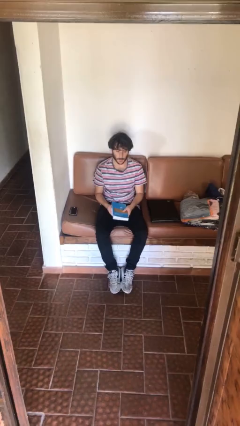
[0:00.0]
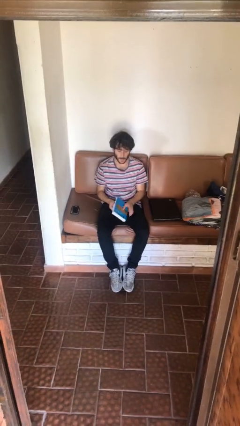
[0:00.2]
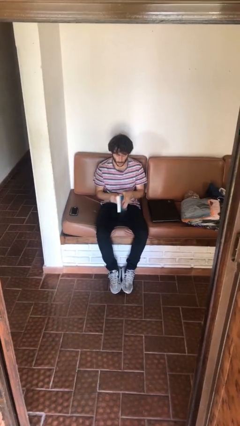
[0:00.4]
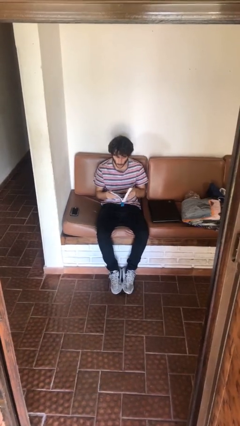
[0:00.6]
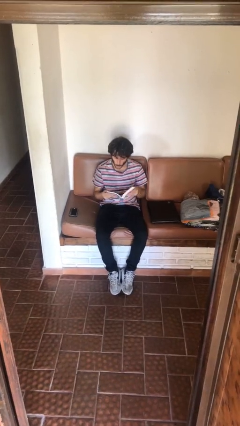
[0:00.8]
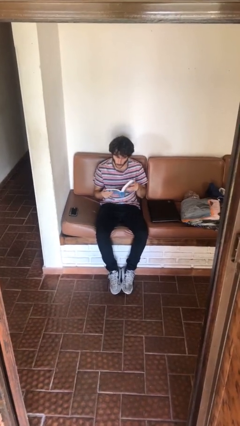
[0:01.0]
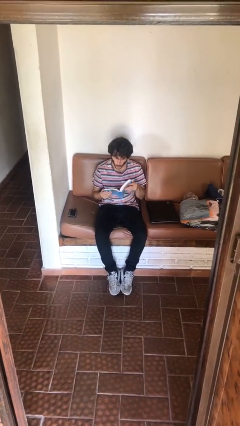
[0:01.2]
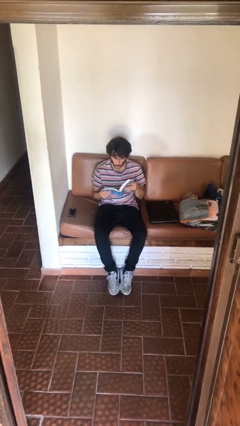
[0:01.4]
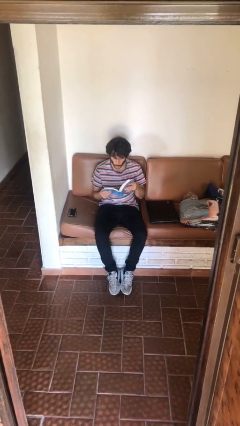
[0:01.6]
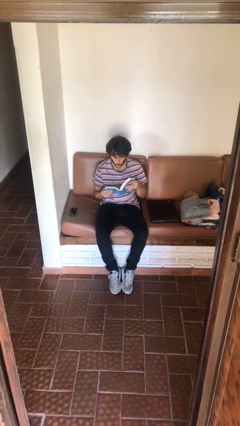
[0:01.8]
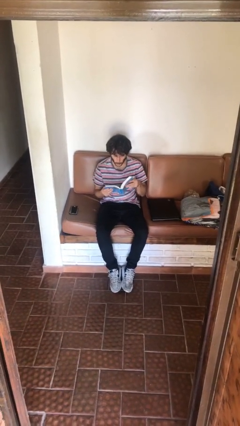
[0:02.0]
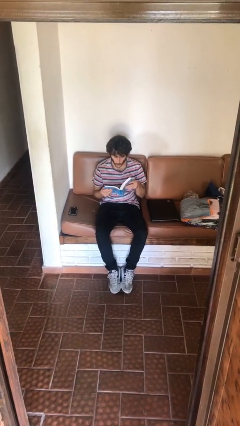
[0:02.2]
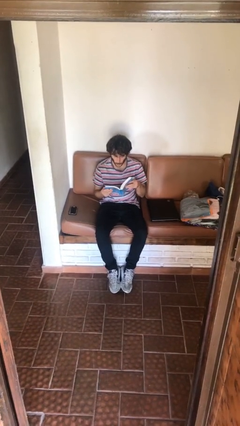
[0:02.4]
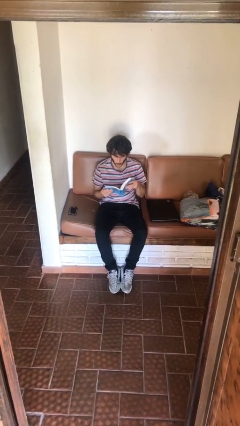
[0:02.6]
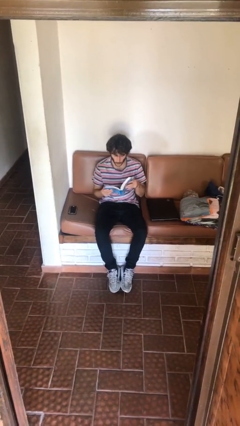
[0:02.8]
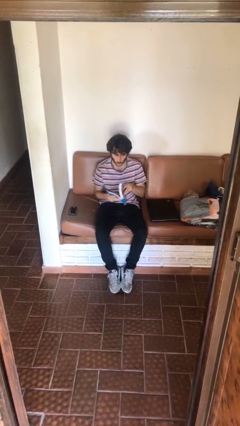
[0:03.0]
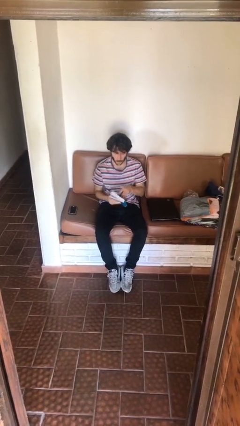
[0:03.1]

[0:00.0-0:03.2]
person reads document

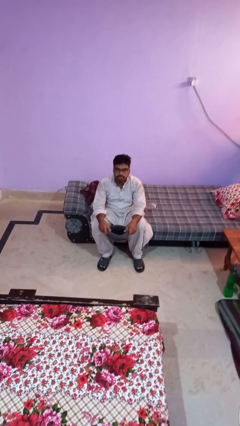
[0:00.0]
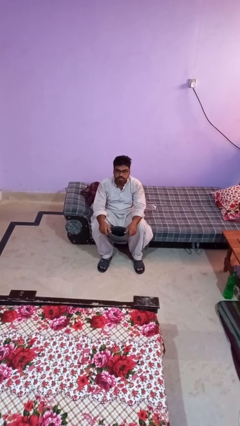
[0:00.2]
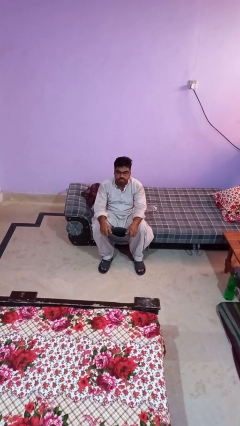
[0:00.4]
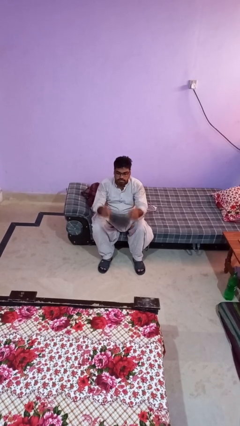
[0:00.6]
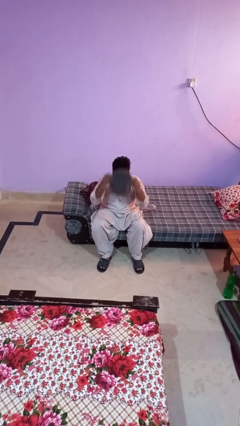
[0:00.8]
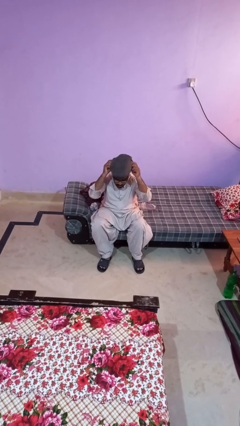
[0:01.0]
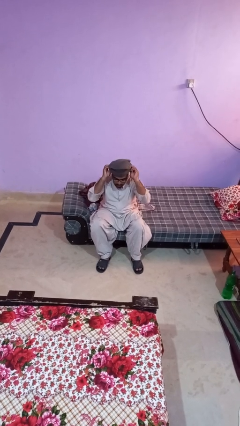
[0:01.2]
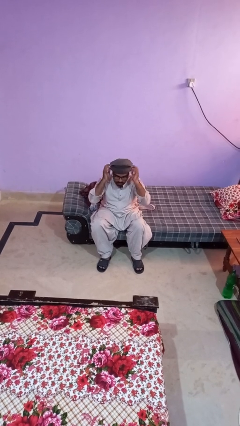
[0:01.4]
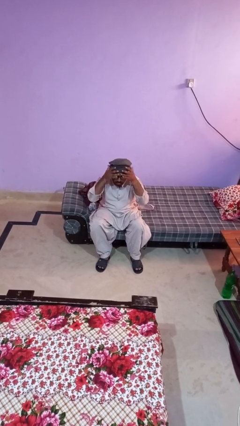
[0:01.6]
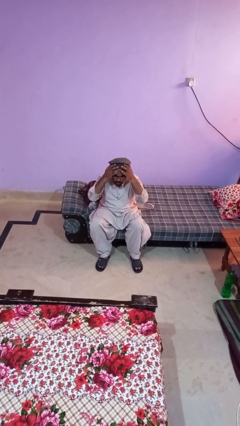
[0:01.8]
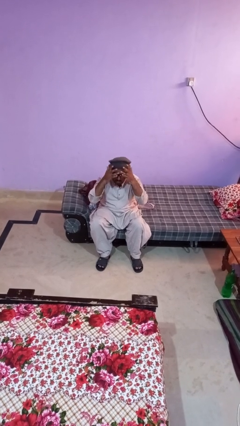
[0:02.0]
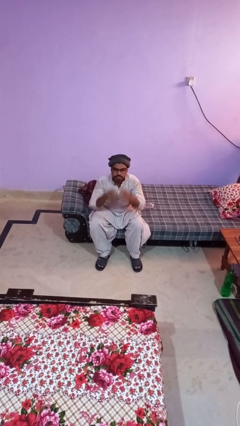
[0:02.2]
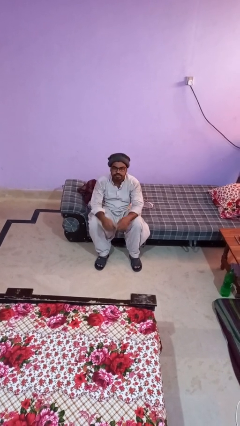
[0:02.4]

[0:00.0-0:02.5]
person puts on hat

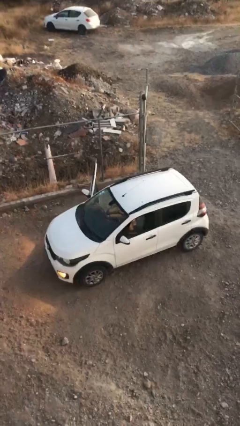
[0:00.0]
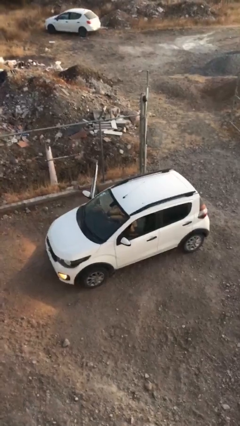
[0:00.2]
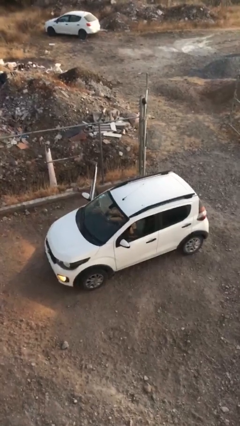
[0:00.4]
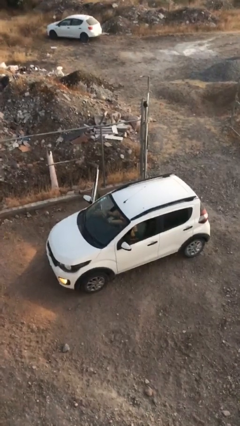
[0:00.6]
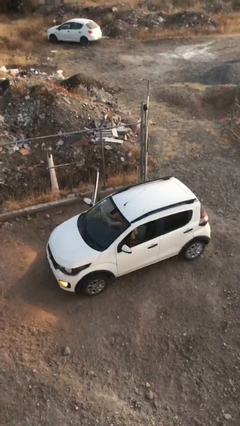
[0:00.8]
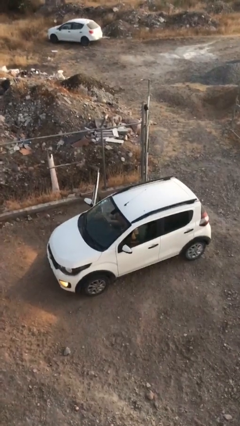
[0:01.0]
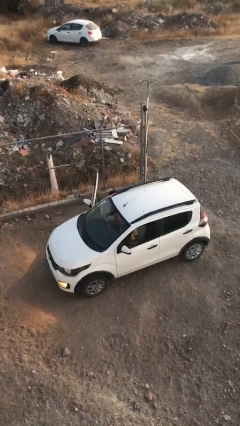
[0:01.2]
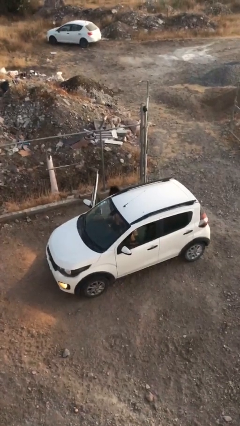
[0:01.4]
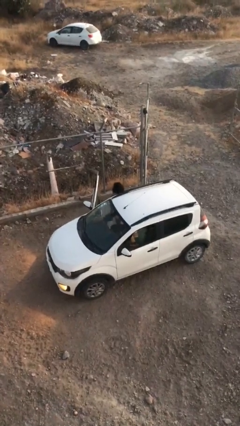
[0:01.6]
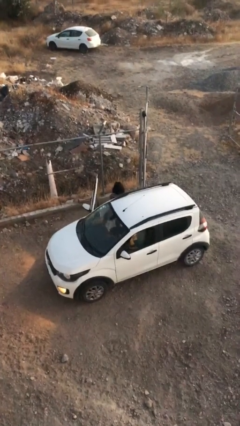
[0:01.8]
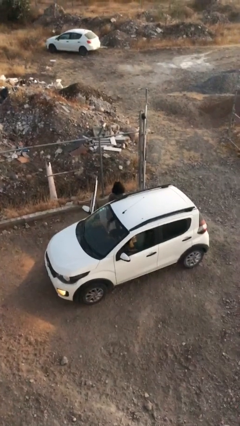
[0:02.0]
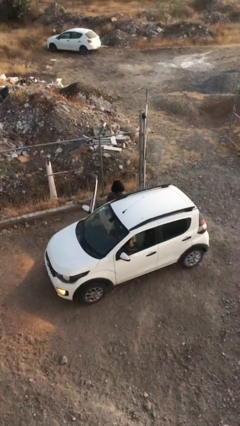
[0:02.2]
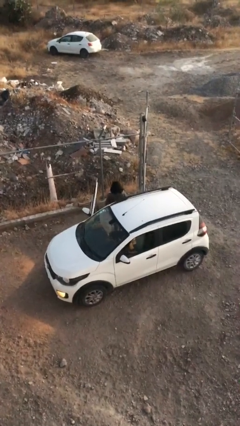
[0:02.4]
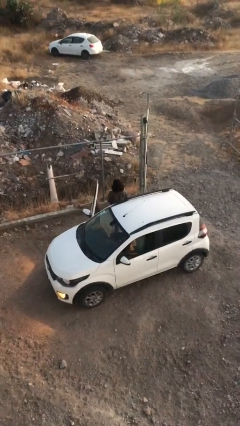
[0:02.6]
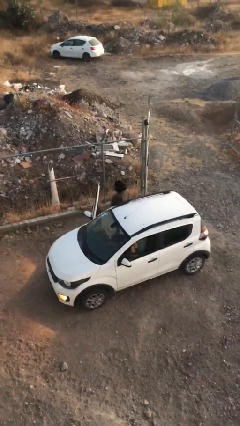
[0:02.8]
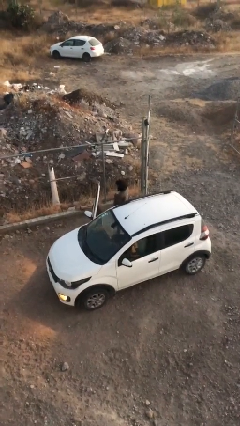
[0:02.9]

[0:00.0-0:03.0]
person exits car

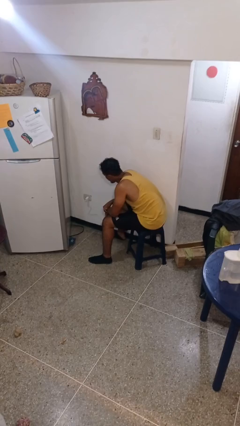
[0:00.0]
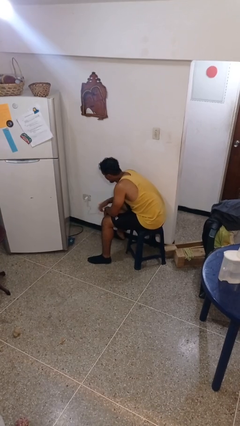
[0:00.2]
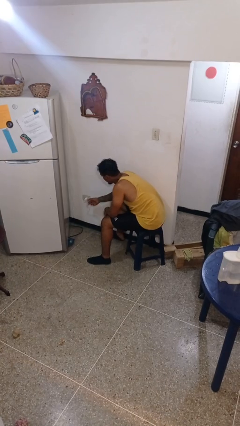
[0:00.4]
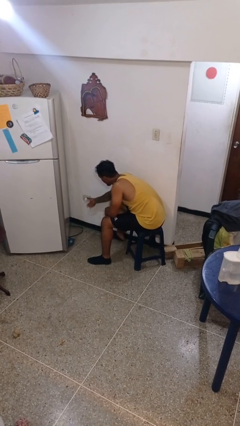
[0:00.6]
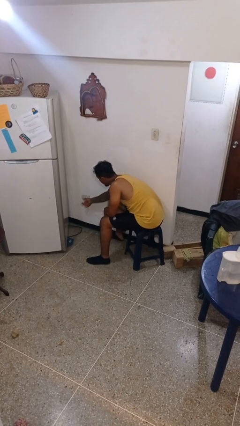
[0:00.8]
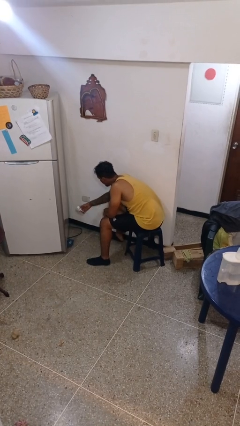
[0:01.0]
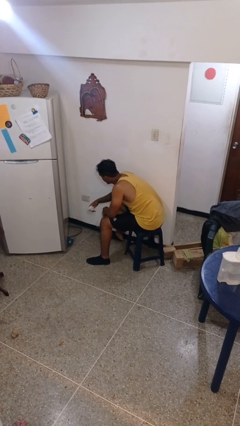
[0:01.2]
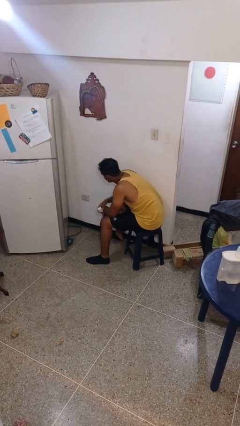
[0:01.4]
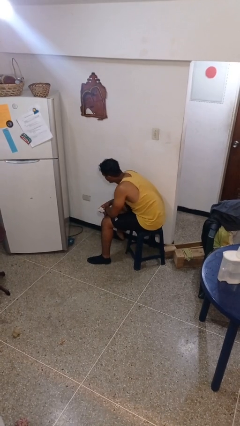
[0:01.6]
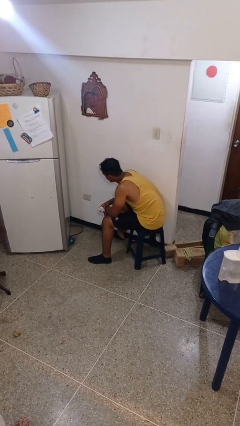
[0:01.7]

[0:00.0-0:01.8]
person unplugs from electrical socket

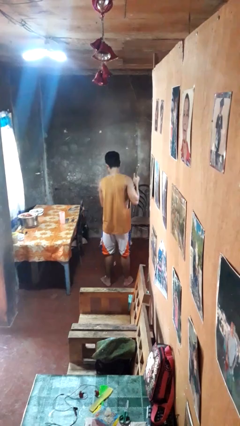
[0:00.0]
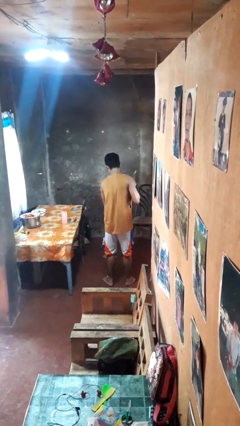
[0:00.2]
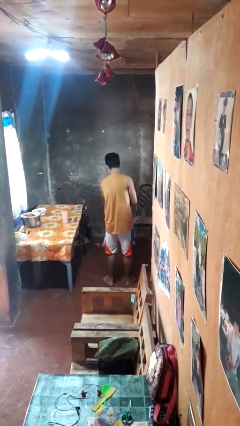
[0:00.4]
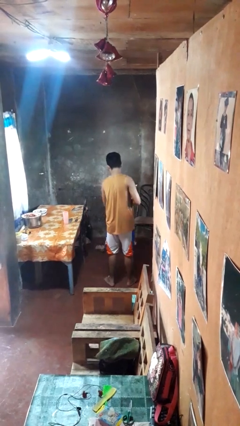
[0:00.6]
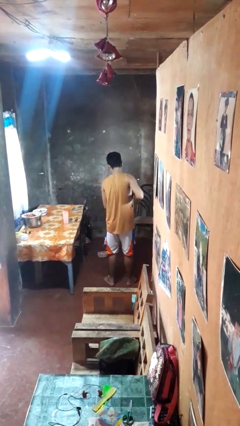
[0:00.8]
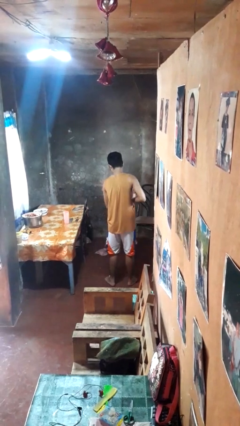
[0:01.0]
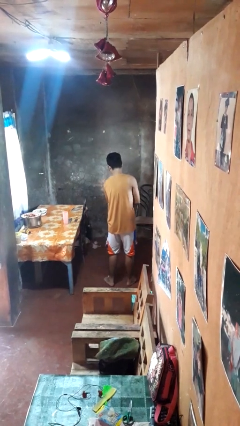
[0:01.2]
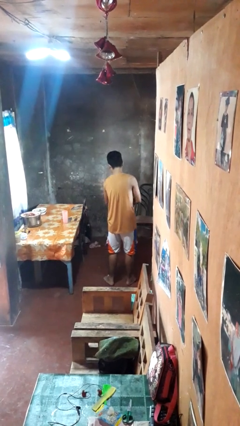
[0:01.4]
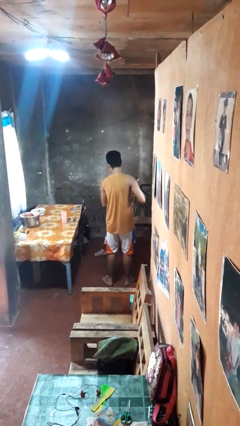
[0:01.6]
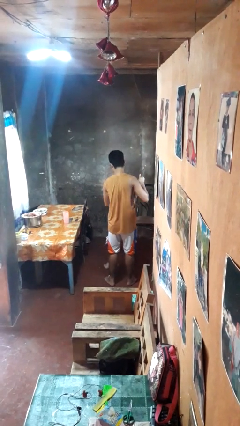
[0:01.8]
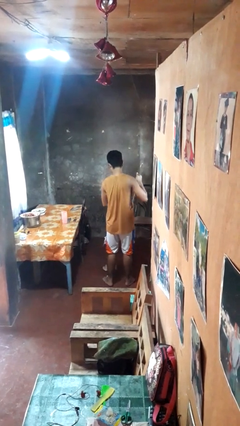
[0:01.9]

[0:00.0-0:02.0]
person mops

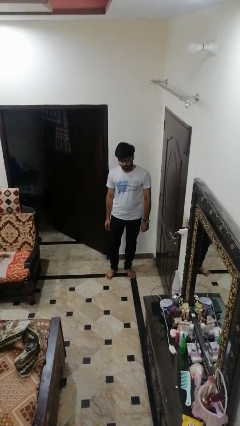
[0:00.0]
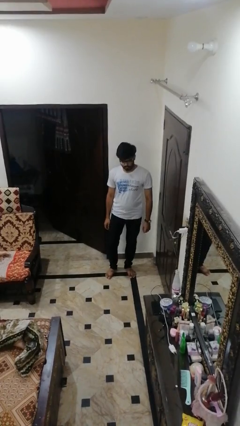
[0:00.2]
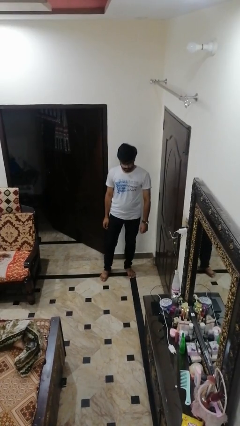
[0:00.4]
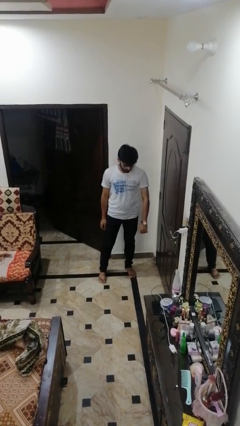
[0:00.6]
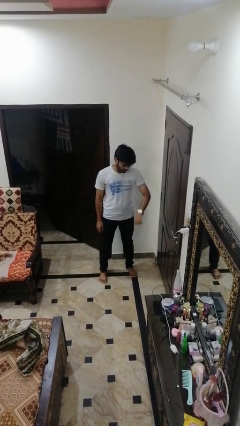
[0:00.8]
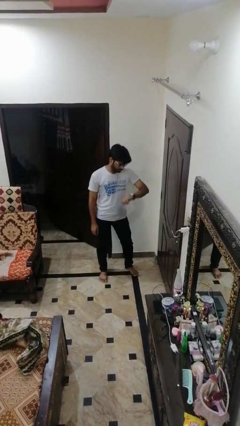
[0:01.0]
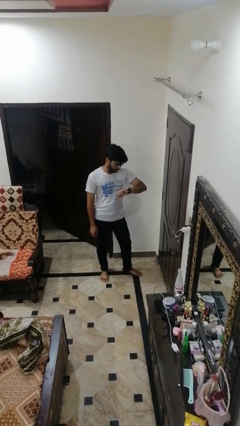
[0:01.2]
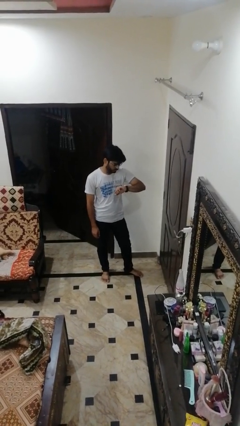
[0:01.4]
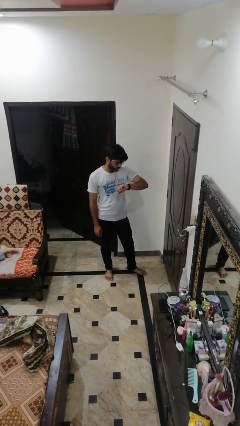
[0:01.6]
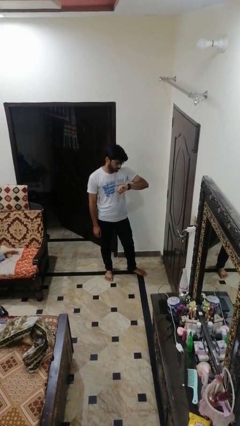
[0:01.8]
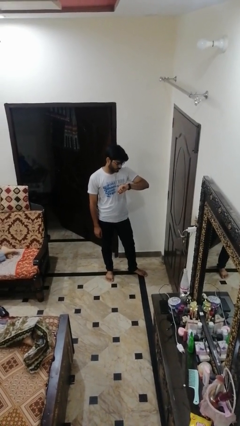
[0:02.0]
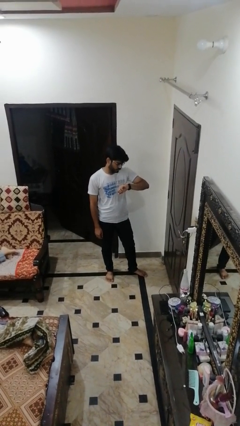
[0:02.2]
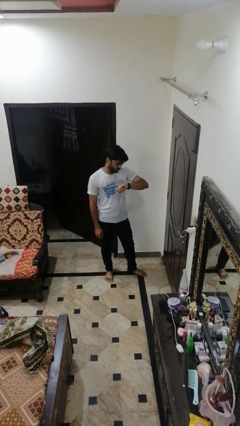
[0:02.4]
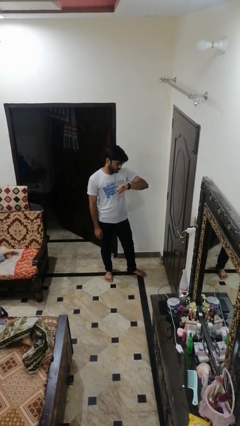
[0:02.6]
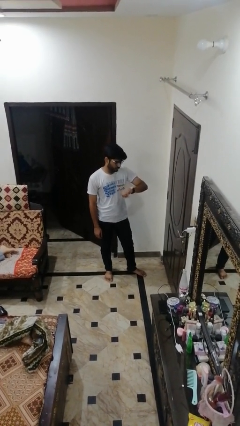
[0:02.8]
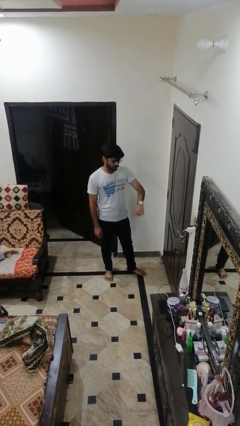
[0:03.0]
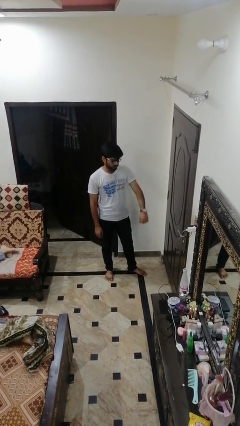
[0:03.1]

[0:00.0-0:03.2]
person looks at wristwatch

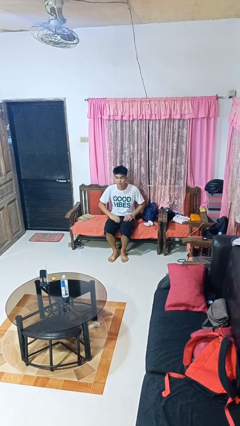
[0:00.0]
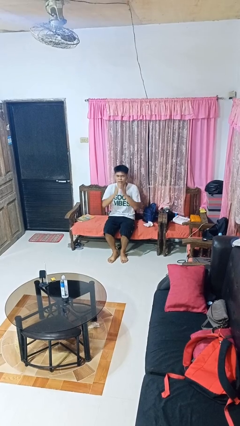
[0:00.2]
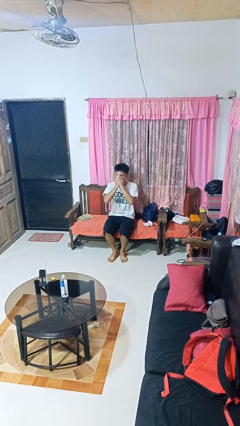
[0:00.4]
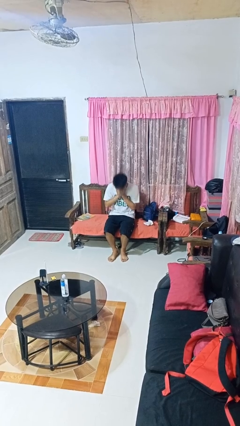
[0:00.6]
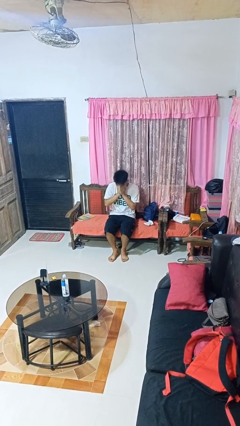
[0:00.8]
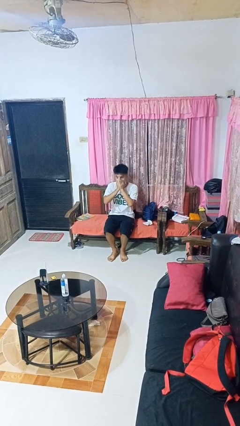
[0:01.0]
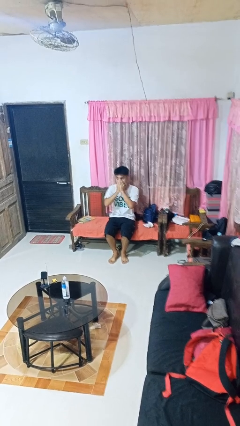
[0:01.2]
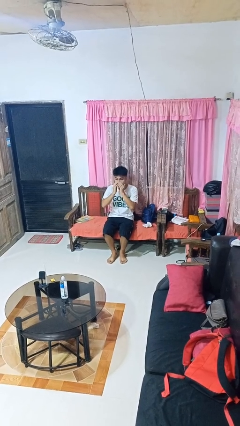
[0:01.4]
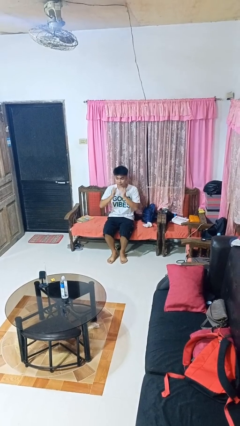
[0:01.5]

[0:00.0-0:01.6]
person sneezes into hand

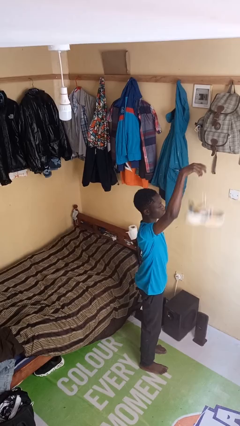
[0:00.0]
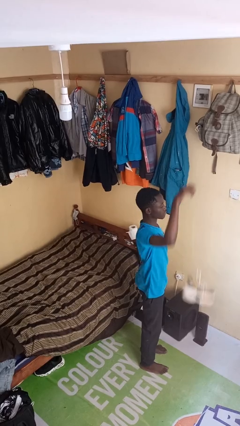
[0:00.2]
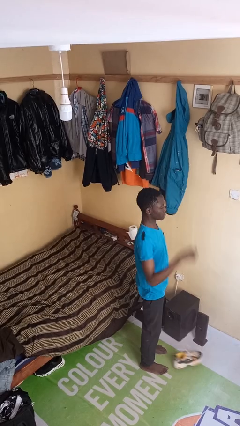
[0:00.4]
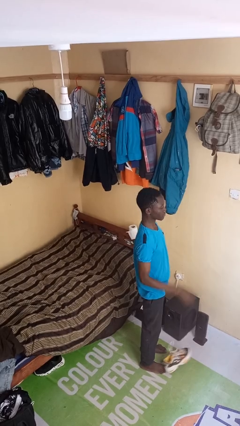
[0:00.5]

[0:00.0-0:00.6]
person drops object
